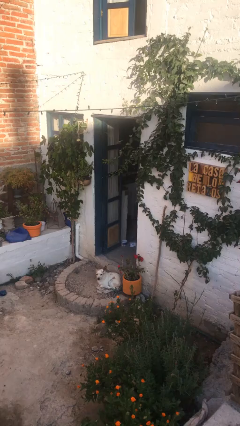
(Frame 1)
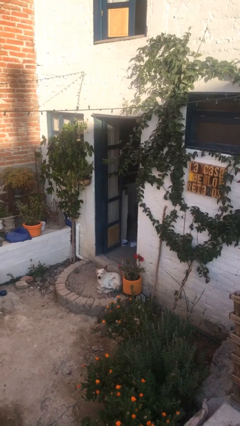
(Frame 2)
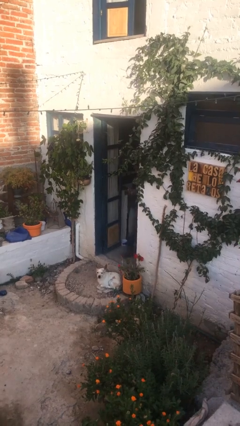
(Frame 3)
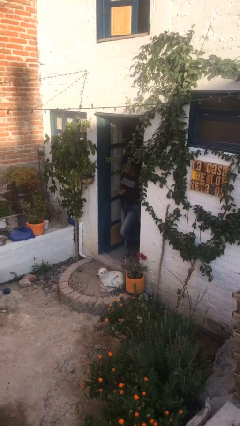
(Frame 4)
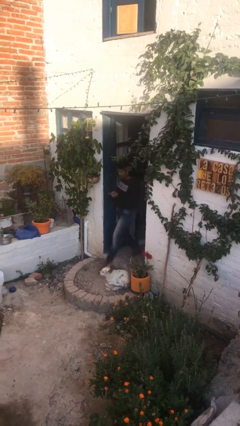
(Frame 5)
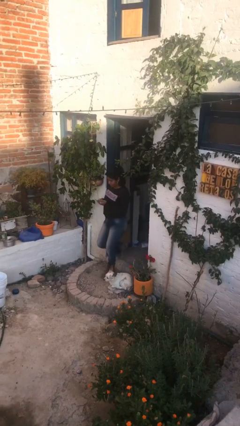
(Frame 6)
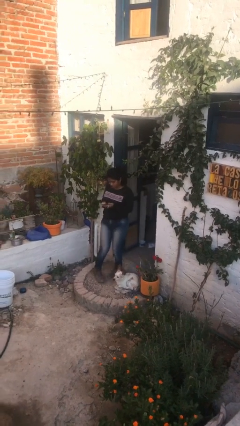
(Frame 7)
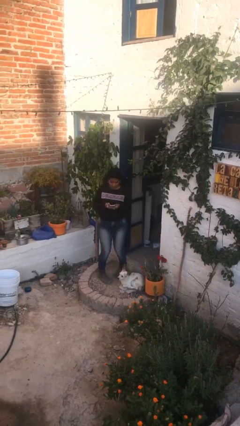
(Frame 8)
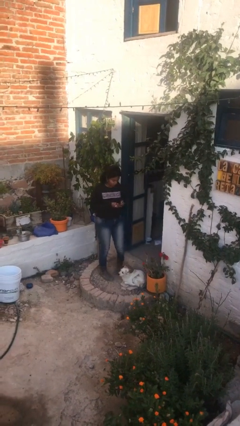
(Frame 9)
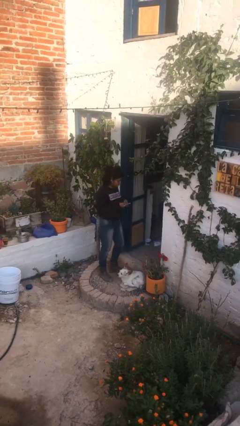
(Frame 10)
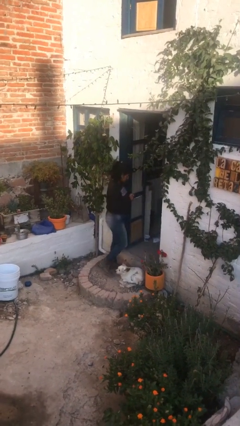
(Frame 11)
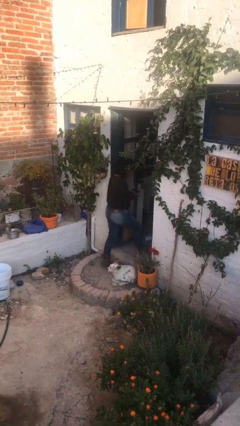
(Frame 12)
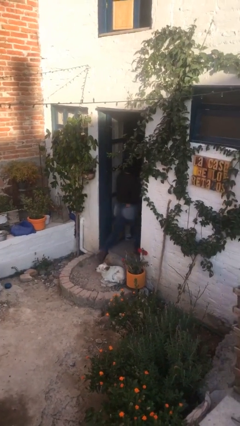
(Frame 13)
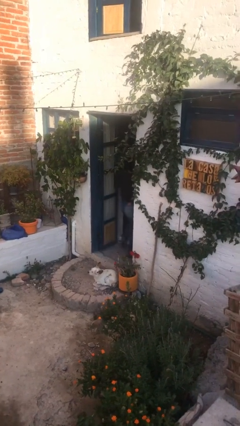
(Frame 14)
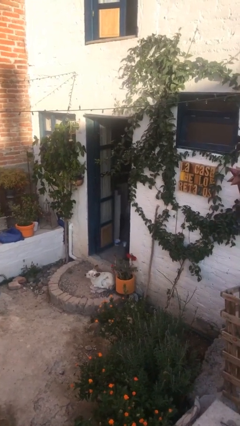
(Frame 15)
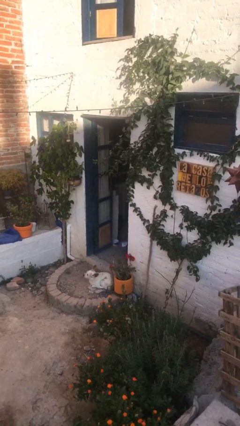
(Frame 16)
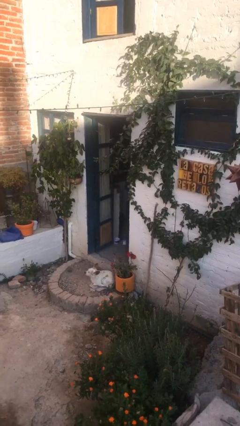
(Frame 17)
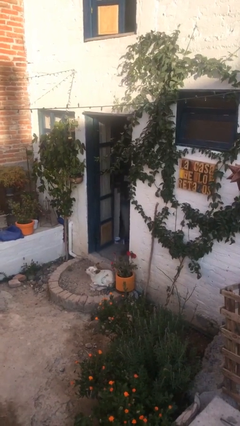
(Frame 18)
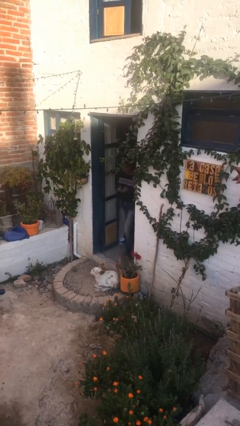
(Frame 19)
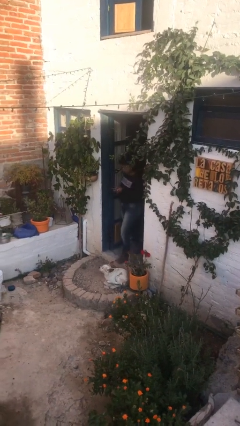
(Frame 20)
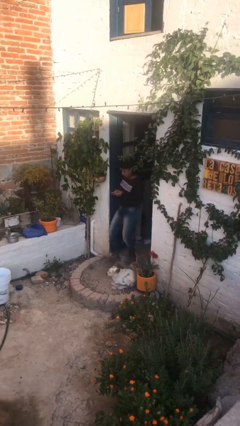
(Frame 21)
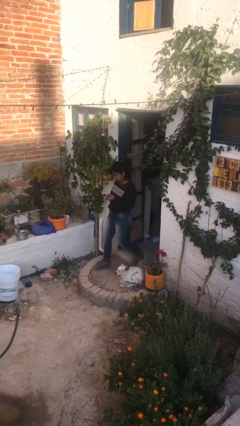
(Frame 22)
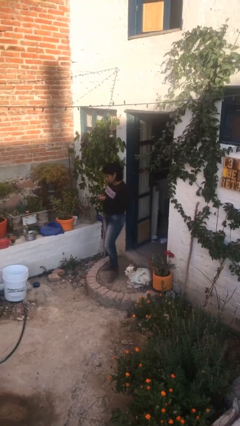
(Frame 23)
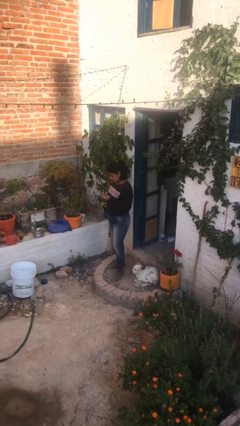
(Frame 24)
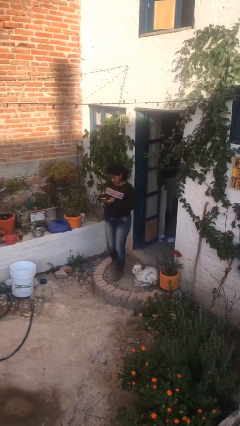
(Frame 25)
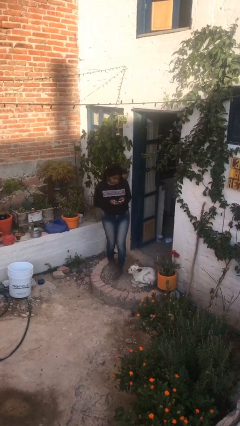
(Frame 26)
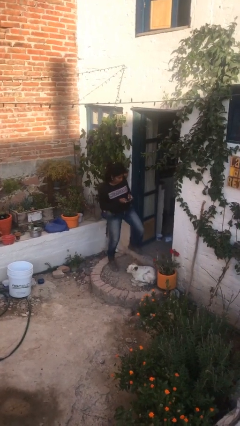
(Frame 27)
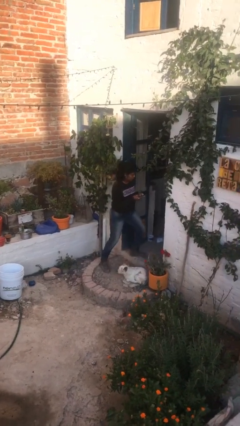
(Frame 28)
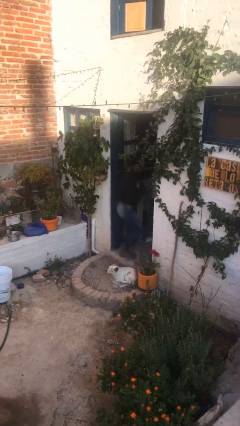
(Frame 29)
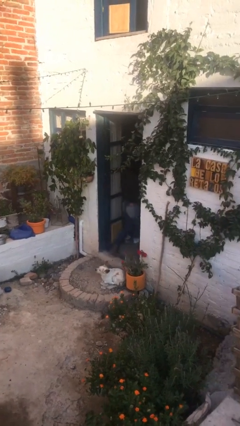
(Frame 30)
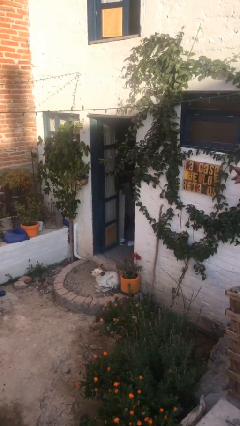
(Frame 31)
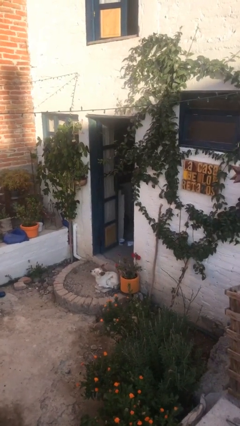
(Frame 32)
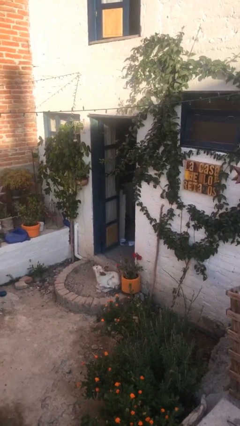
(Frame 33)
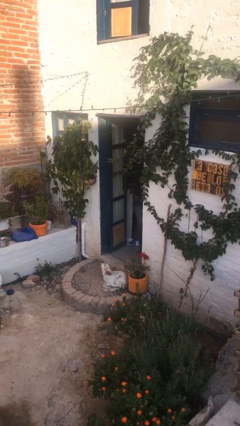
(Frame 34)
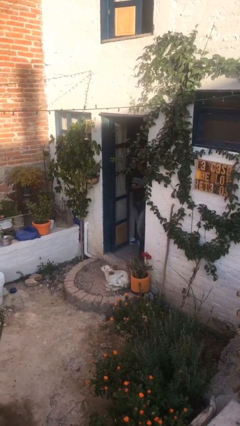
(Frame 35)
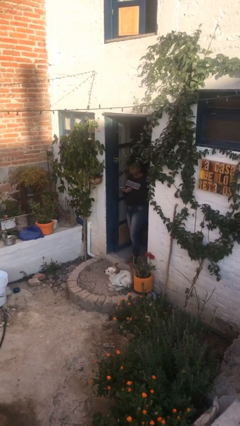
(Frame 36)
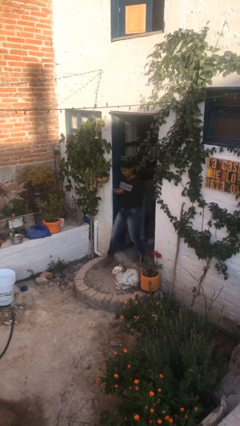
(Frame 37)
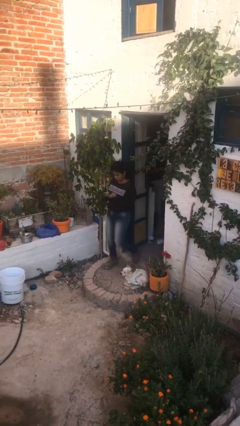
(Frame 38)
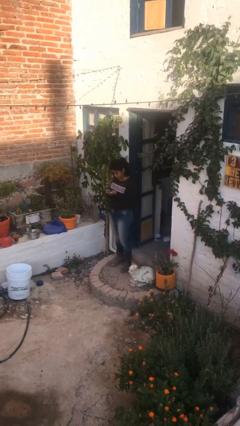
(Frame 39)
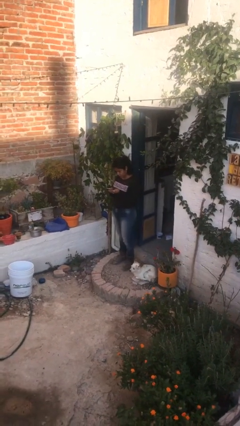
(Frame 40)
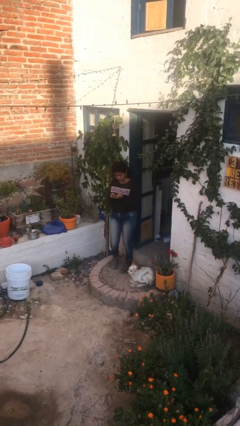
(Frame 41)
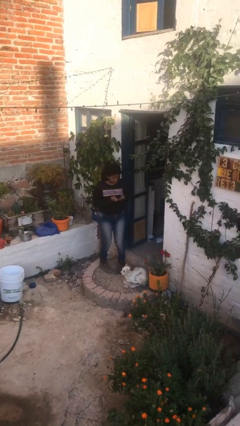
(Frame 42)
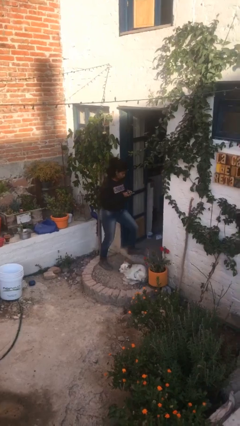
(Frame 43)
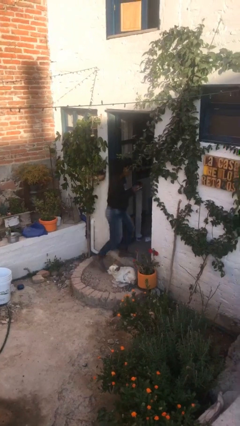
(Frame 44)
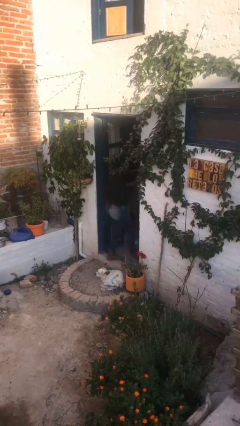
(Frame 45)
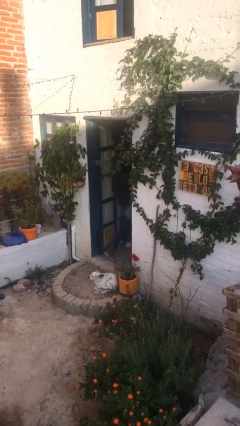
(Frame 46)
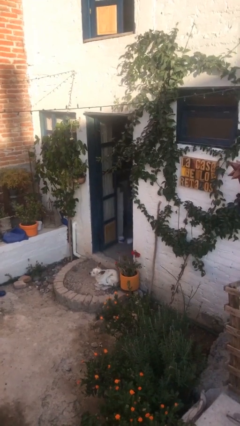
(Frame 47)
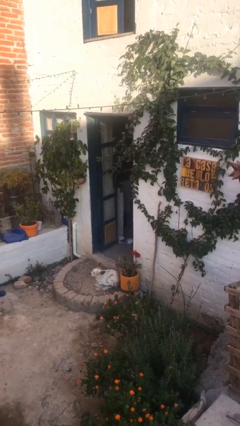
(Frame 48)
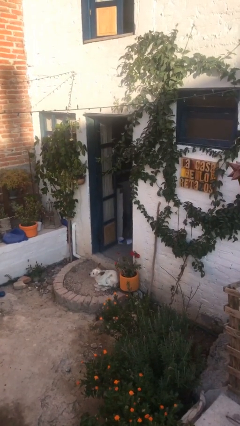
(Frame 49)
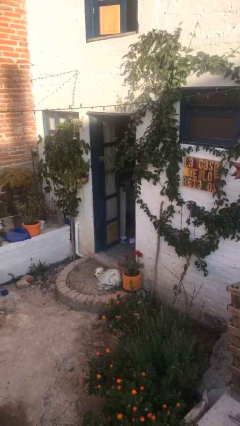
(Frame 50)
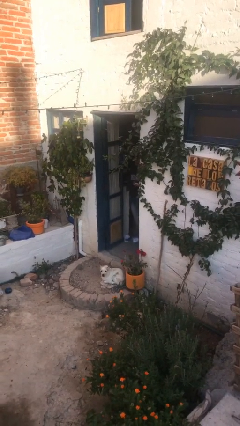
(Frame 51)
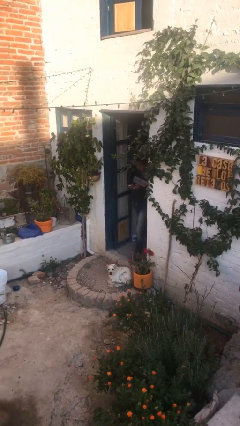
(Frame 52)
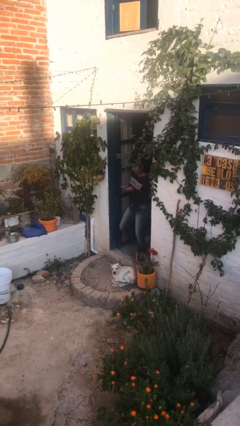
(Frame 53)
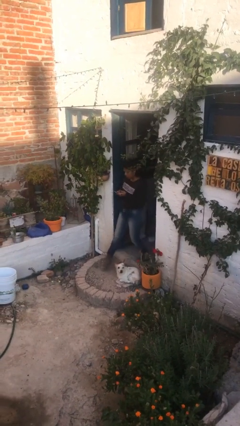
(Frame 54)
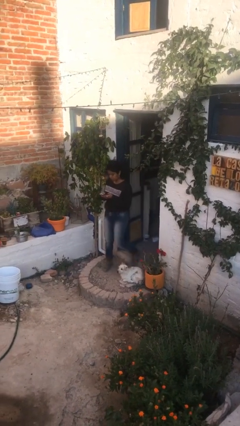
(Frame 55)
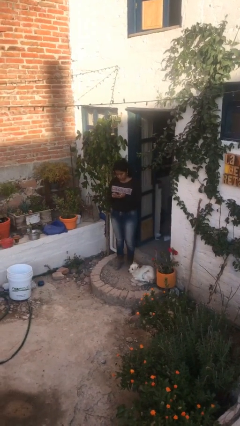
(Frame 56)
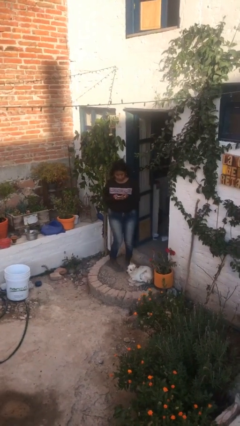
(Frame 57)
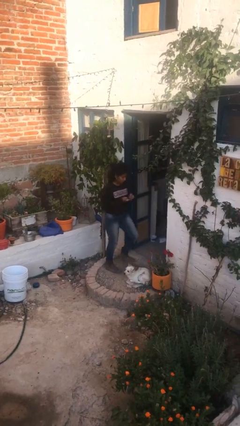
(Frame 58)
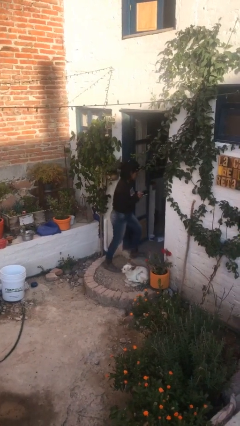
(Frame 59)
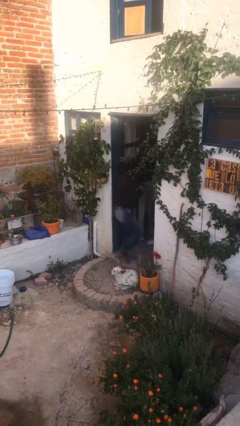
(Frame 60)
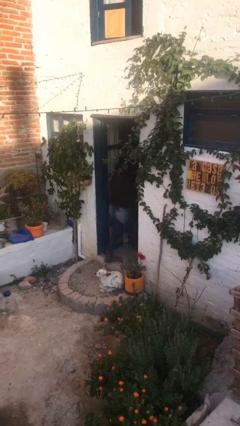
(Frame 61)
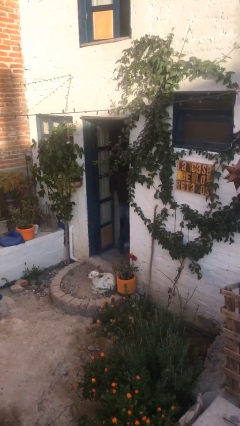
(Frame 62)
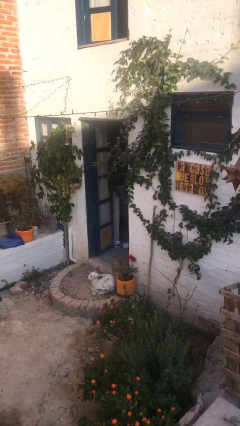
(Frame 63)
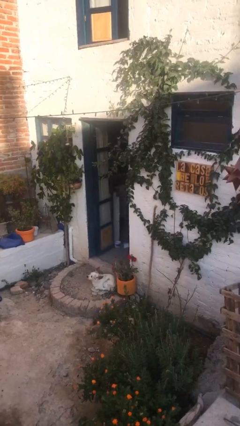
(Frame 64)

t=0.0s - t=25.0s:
person texts on phone

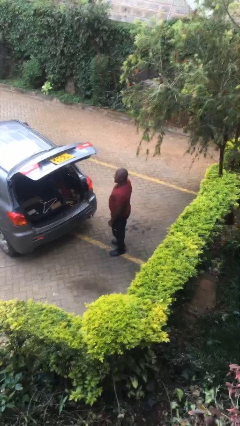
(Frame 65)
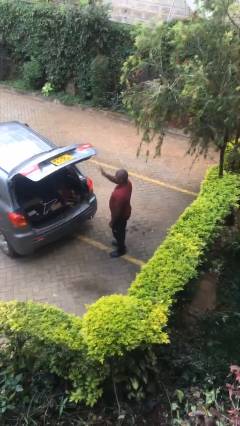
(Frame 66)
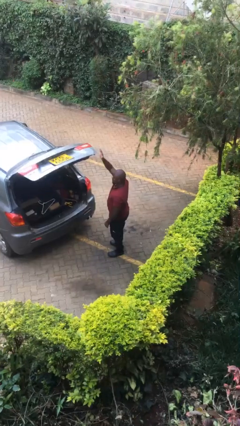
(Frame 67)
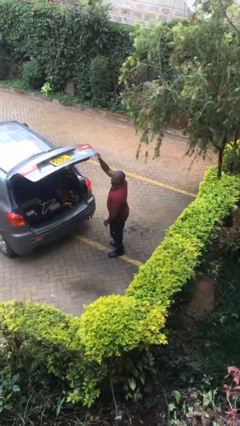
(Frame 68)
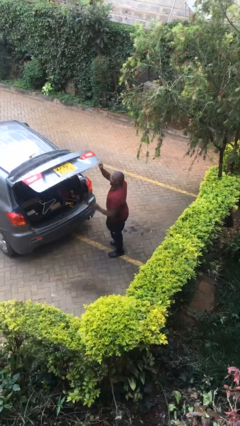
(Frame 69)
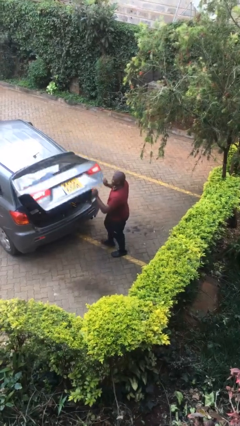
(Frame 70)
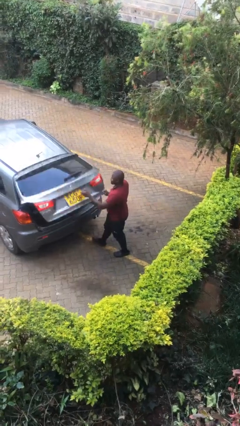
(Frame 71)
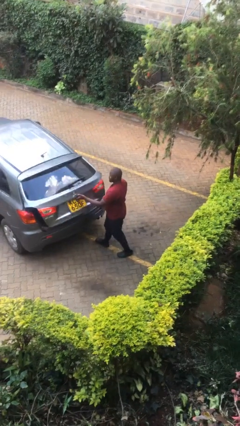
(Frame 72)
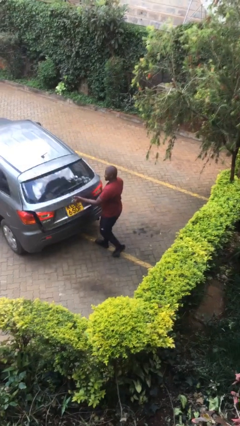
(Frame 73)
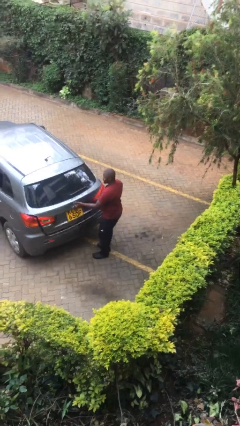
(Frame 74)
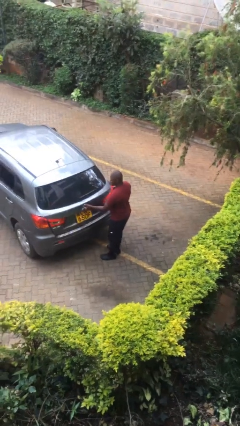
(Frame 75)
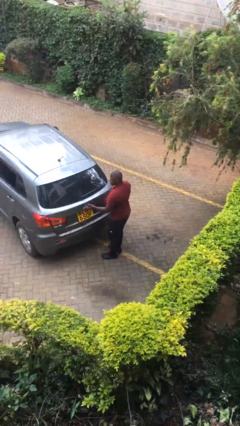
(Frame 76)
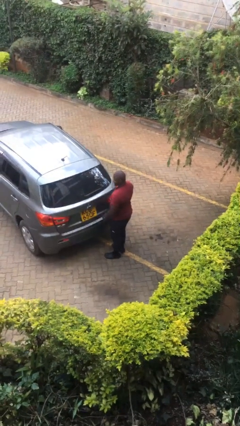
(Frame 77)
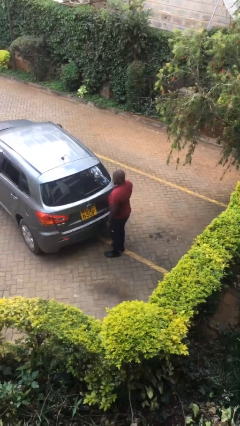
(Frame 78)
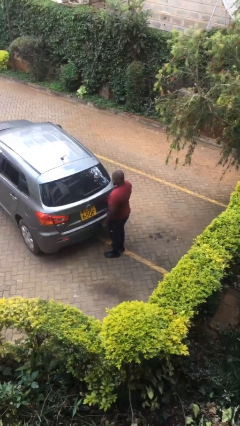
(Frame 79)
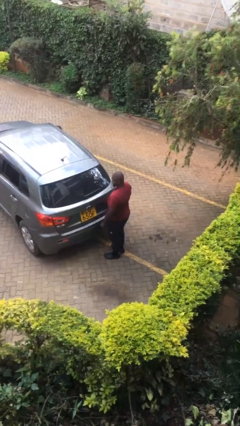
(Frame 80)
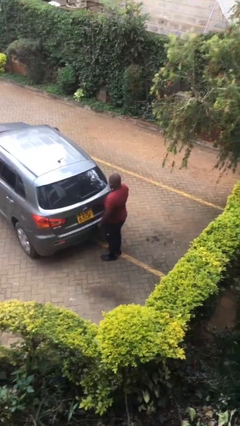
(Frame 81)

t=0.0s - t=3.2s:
person closes car trunk

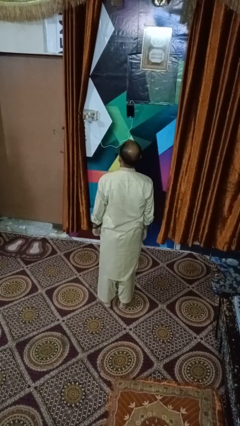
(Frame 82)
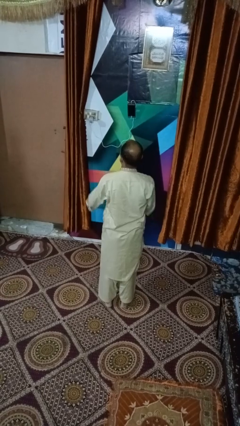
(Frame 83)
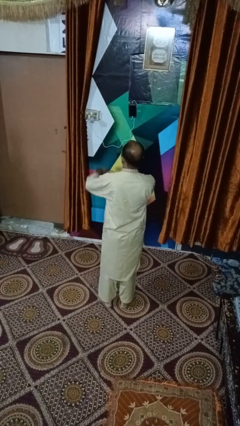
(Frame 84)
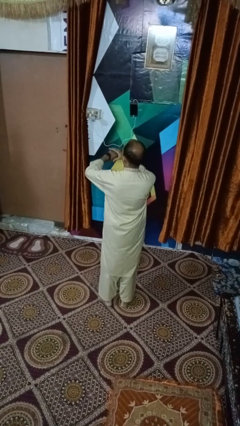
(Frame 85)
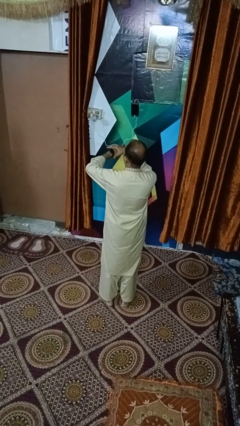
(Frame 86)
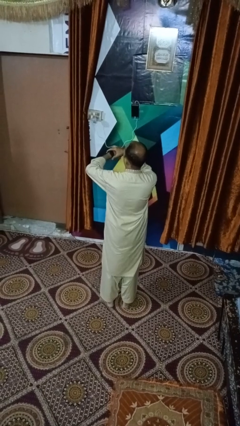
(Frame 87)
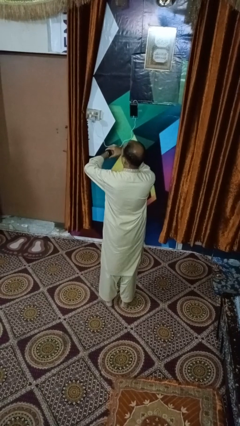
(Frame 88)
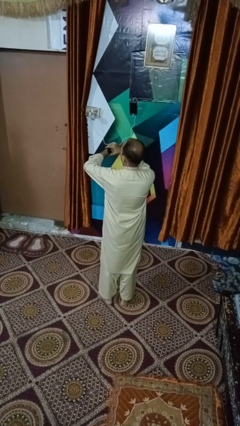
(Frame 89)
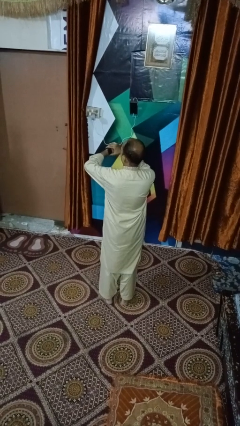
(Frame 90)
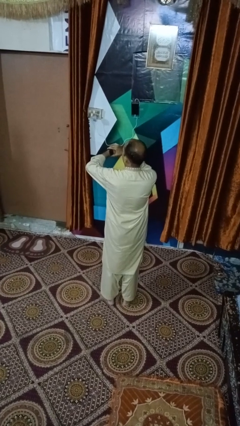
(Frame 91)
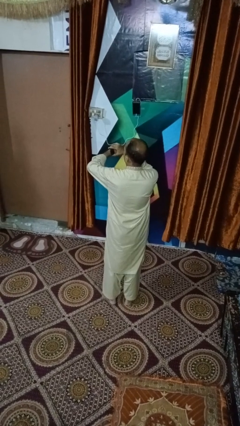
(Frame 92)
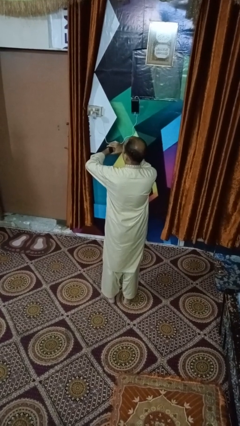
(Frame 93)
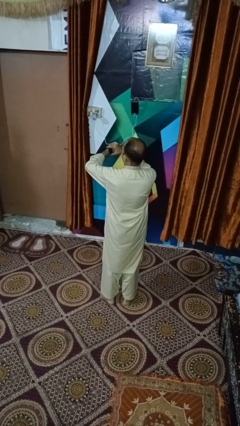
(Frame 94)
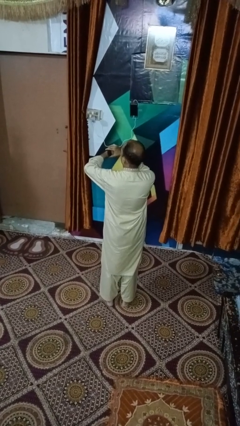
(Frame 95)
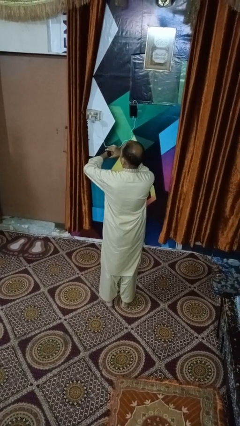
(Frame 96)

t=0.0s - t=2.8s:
person looks at wristwatch
